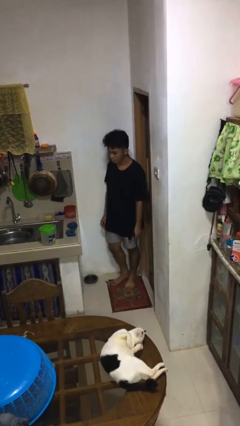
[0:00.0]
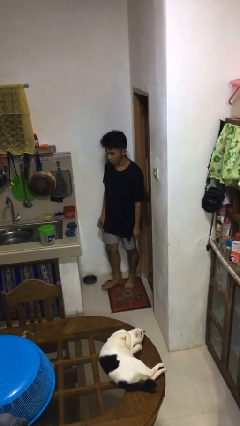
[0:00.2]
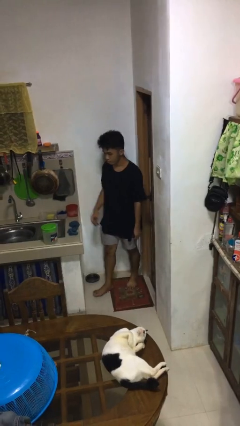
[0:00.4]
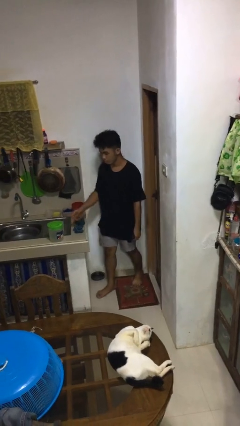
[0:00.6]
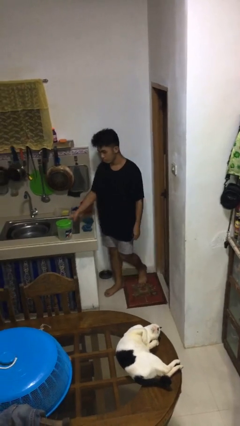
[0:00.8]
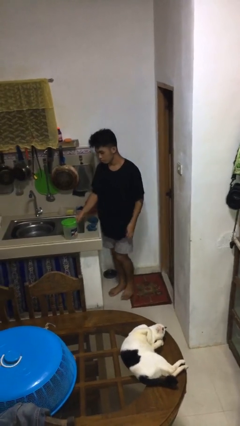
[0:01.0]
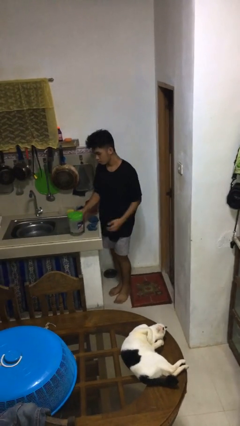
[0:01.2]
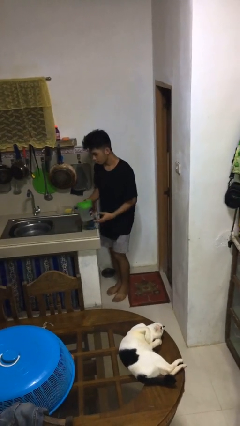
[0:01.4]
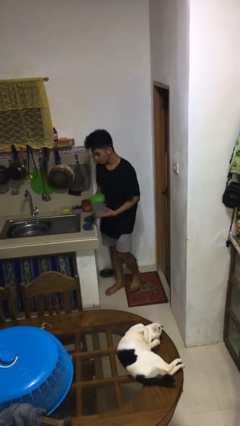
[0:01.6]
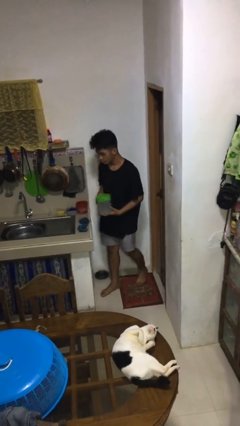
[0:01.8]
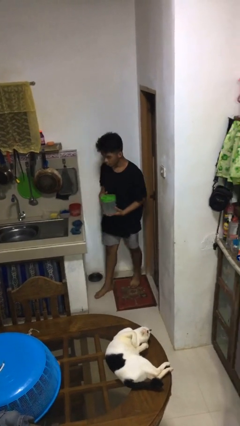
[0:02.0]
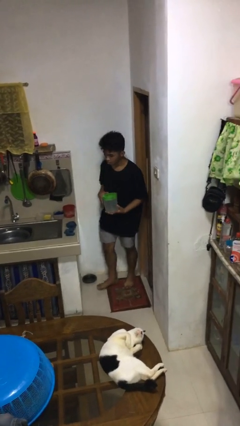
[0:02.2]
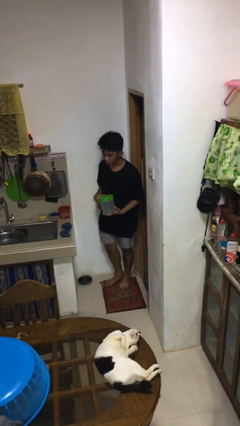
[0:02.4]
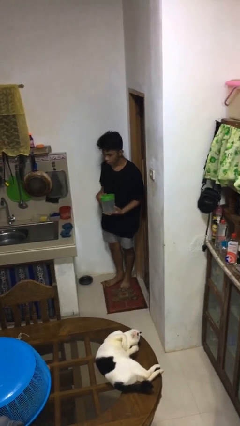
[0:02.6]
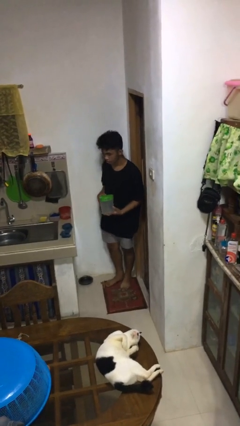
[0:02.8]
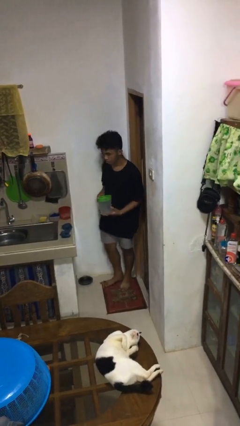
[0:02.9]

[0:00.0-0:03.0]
person picks up object from countertop

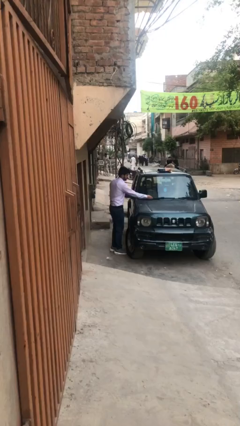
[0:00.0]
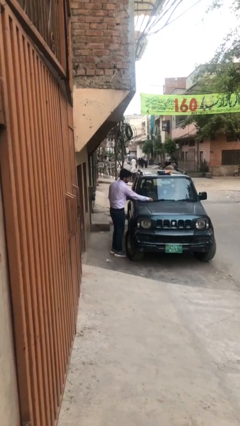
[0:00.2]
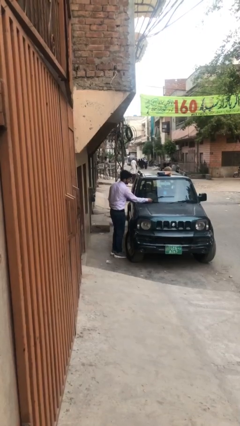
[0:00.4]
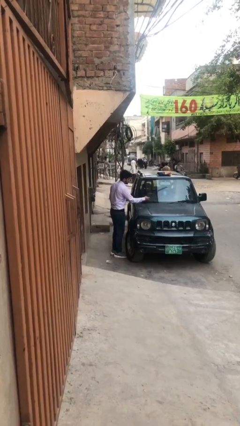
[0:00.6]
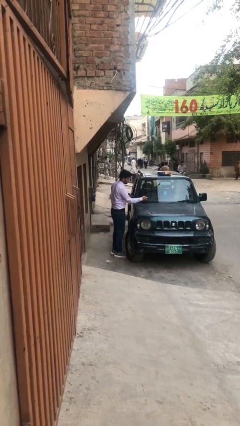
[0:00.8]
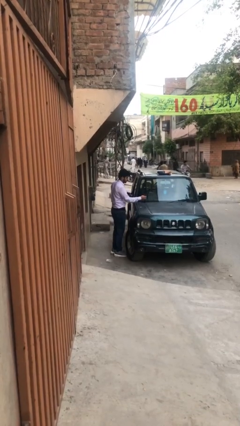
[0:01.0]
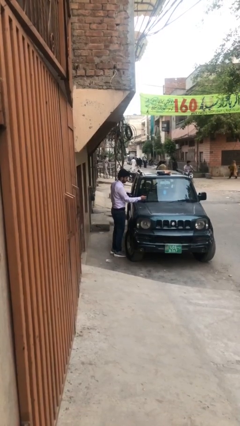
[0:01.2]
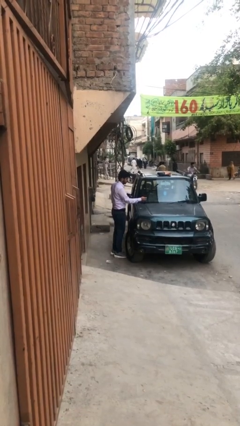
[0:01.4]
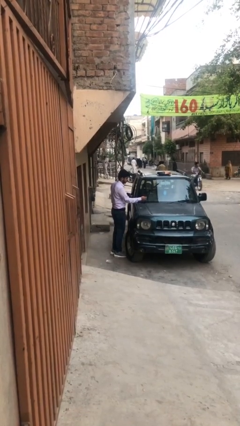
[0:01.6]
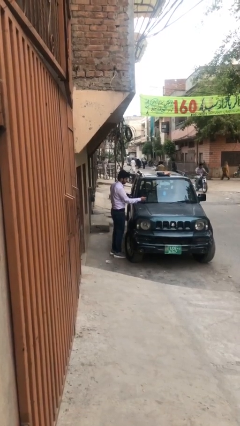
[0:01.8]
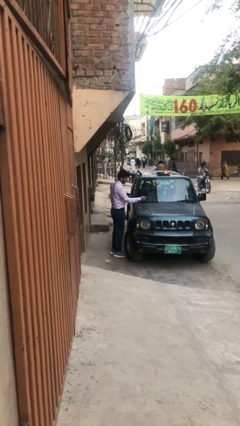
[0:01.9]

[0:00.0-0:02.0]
person flips up car wipers

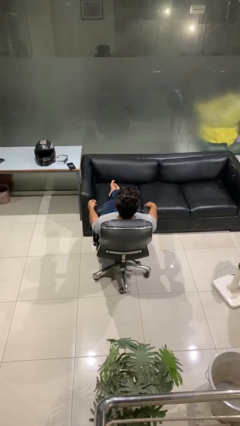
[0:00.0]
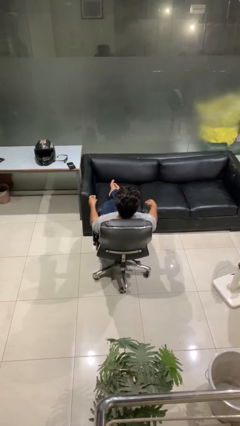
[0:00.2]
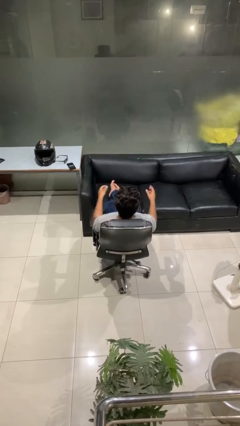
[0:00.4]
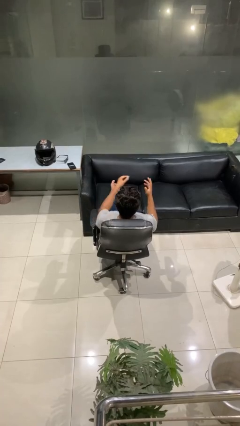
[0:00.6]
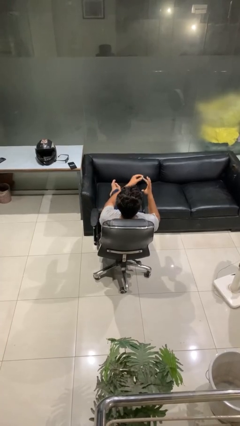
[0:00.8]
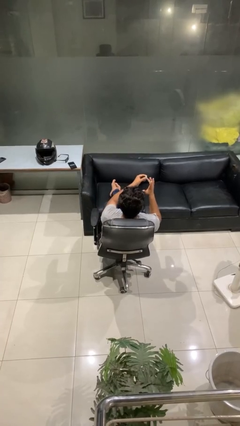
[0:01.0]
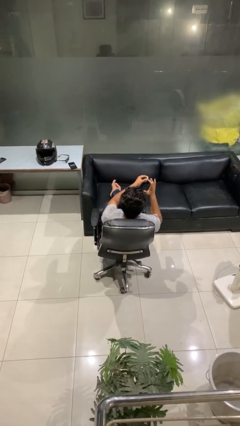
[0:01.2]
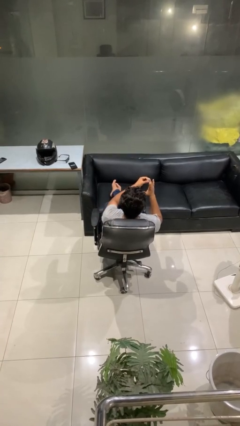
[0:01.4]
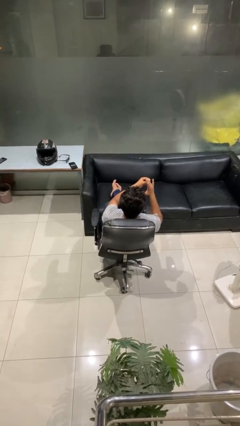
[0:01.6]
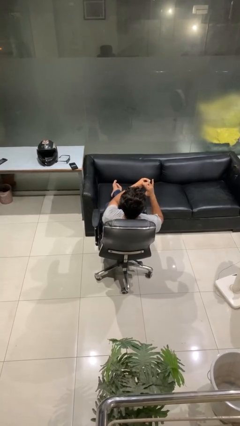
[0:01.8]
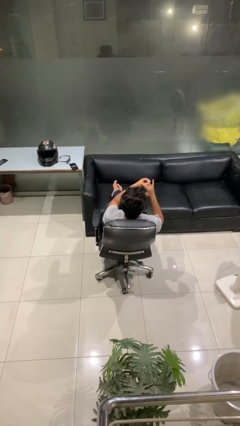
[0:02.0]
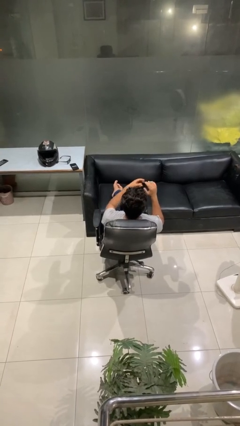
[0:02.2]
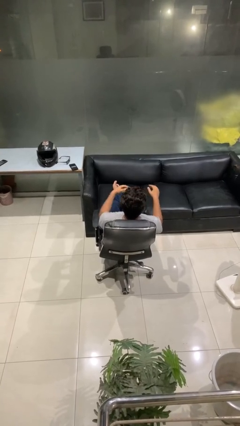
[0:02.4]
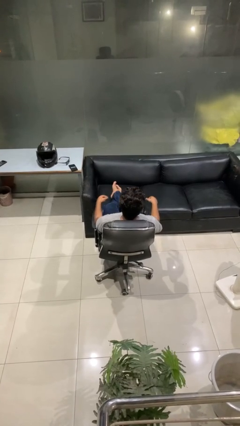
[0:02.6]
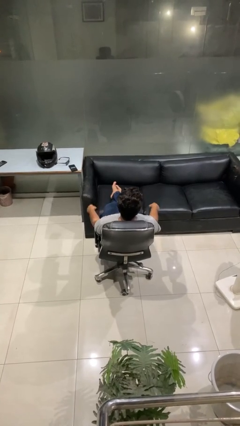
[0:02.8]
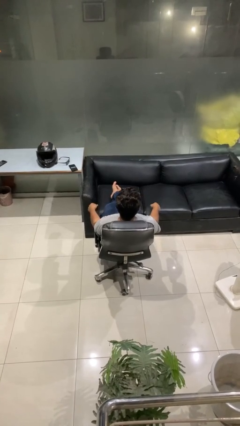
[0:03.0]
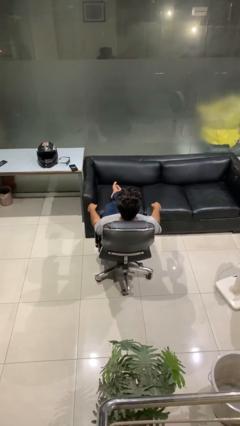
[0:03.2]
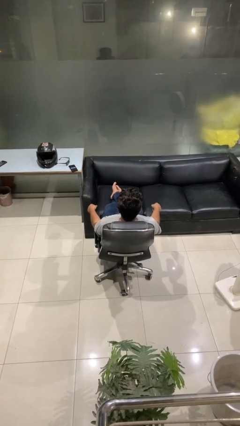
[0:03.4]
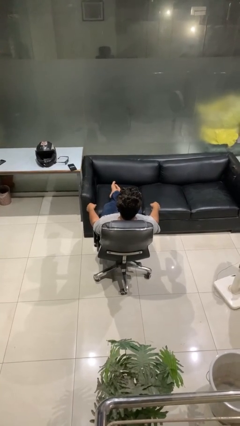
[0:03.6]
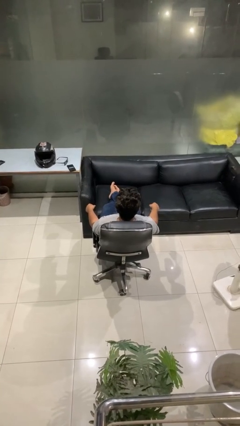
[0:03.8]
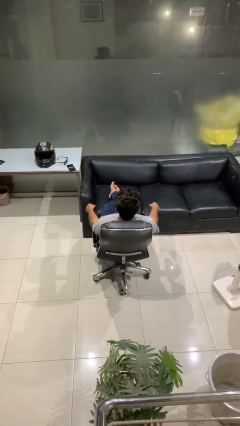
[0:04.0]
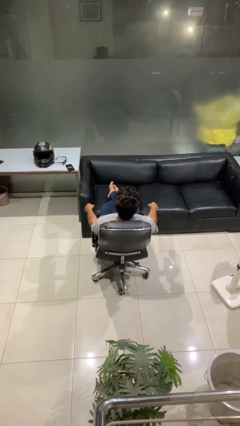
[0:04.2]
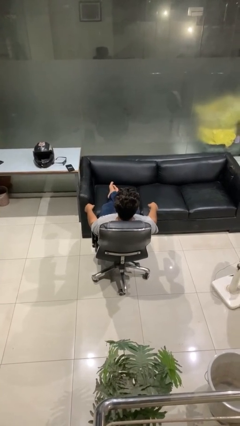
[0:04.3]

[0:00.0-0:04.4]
person puts on ring

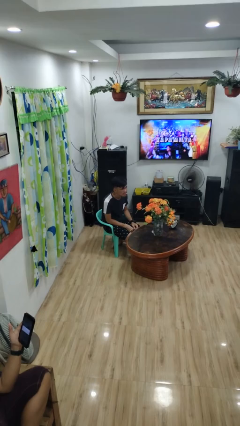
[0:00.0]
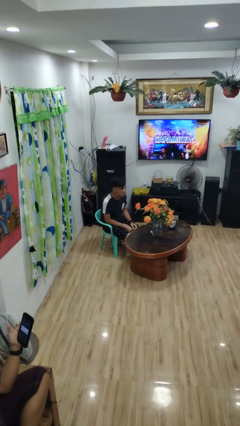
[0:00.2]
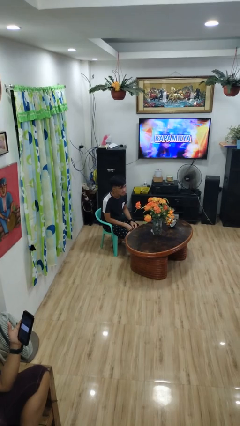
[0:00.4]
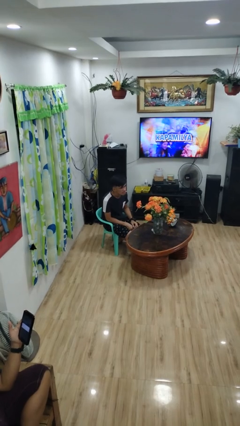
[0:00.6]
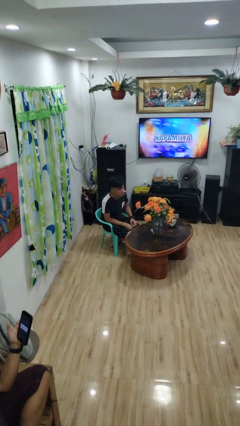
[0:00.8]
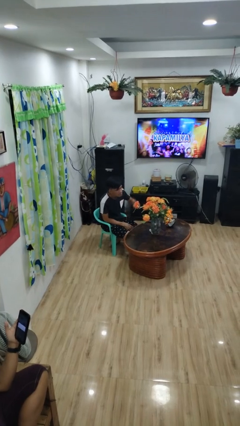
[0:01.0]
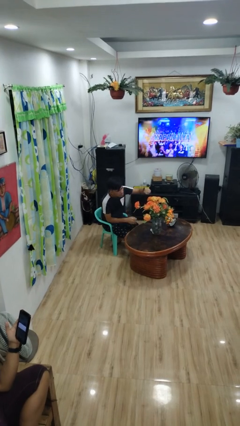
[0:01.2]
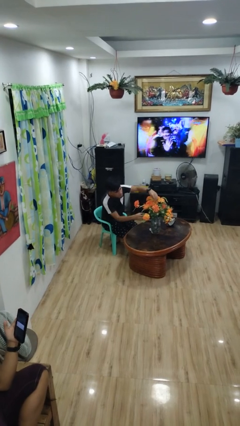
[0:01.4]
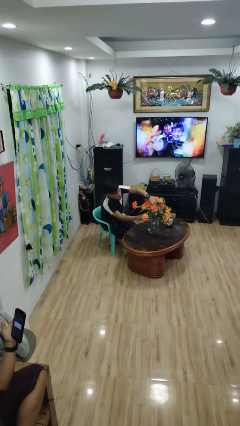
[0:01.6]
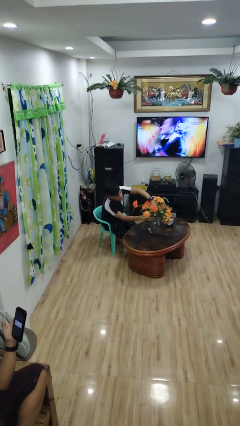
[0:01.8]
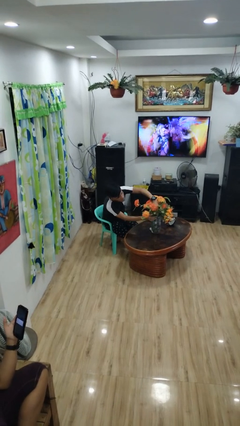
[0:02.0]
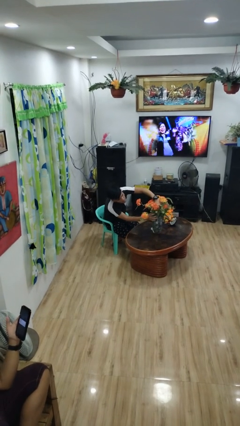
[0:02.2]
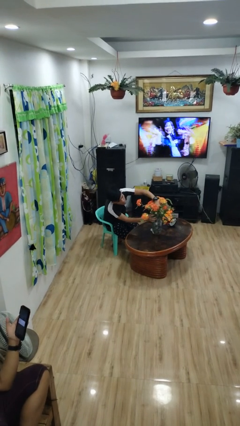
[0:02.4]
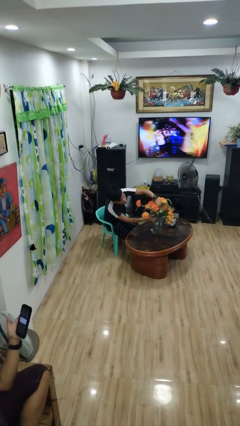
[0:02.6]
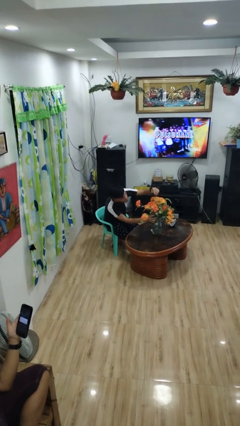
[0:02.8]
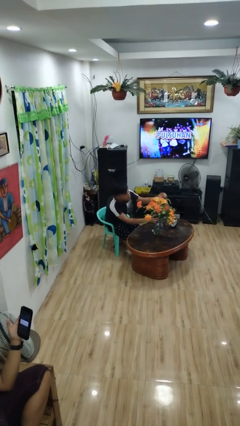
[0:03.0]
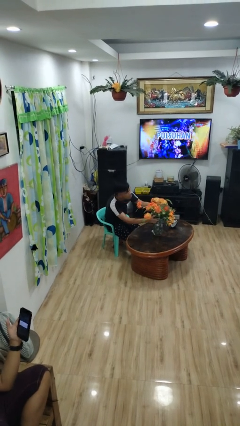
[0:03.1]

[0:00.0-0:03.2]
person arranges flowers in vase

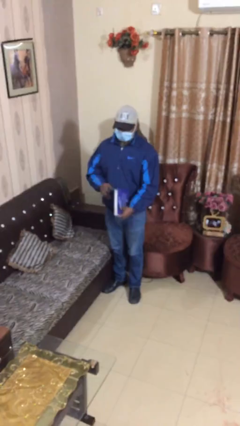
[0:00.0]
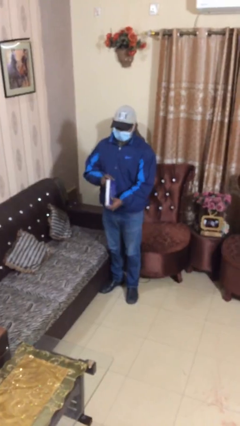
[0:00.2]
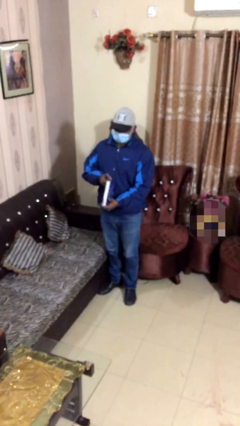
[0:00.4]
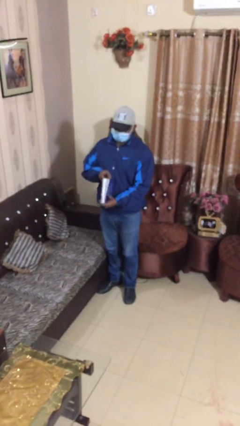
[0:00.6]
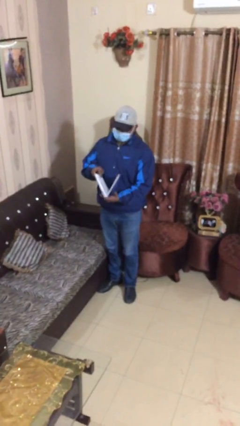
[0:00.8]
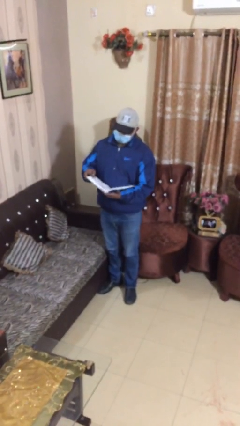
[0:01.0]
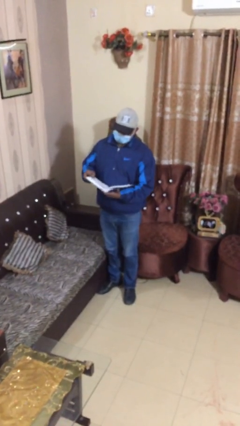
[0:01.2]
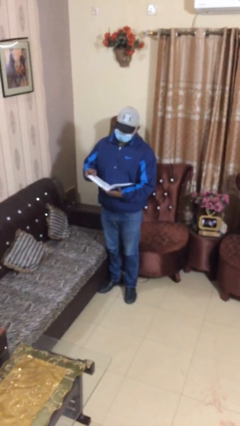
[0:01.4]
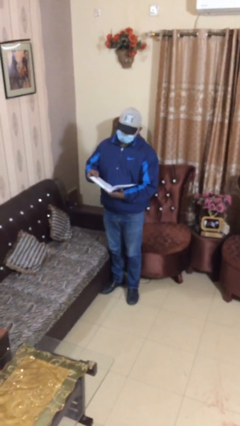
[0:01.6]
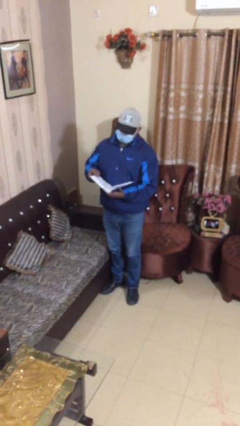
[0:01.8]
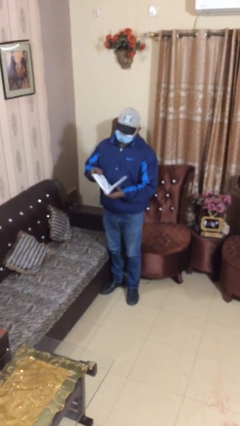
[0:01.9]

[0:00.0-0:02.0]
person reads document

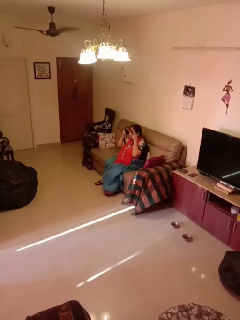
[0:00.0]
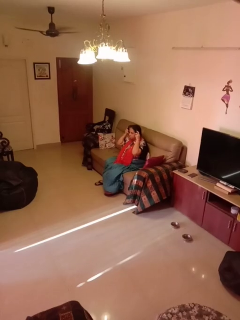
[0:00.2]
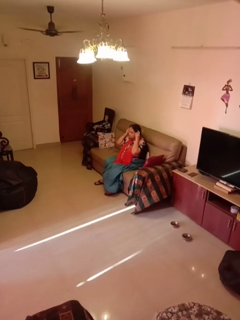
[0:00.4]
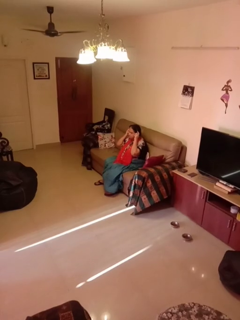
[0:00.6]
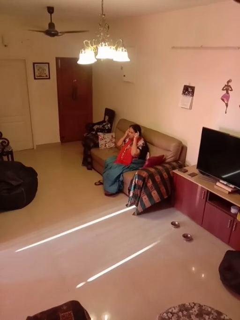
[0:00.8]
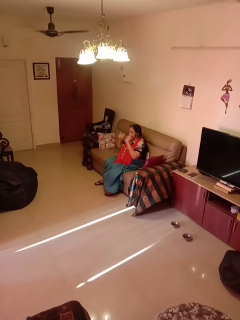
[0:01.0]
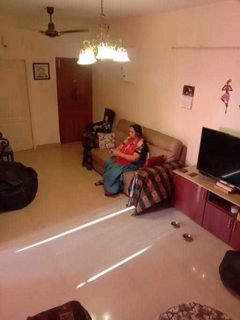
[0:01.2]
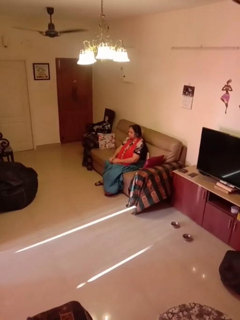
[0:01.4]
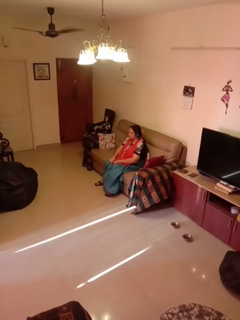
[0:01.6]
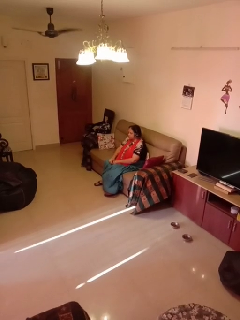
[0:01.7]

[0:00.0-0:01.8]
person puts on headphones

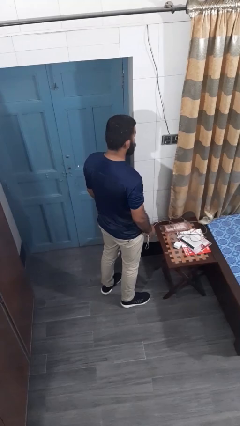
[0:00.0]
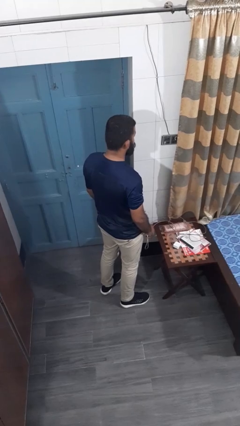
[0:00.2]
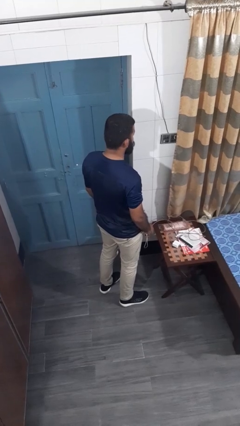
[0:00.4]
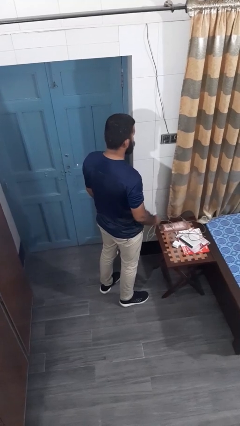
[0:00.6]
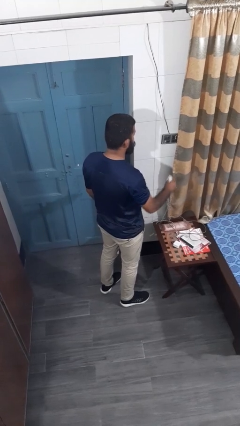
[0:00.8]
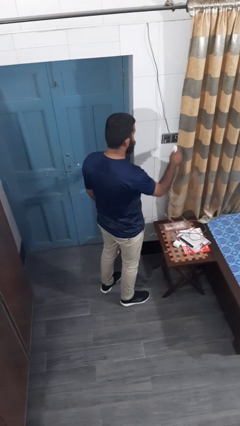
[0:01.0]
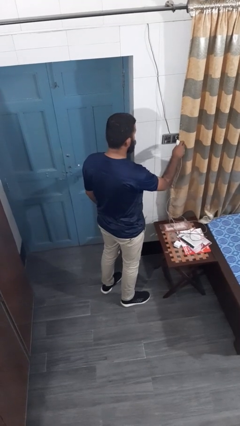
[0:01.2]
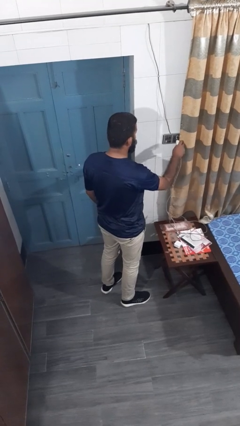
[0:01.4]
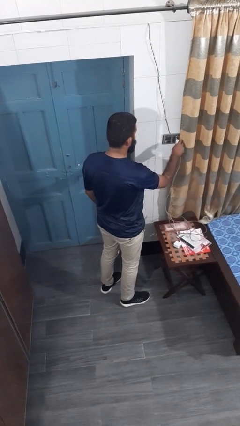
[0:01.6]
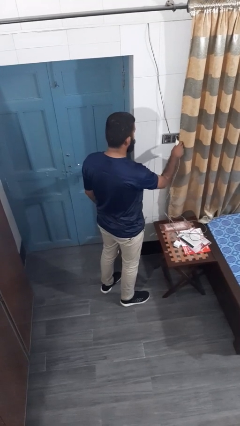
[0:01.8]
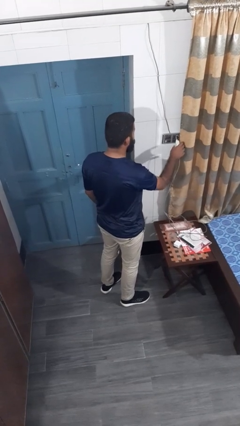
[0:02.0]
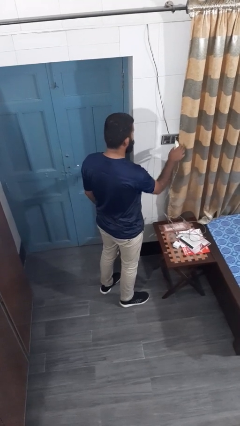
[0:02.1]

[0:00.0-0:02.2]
person plugs into electrical socket
